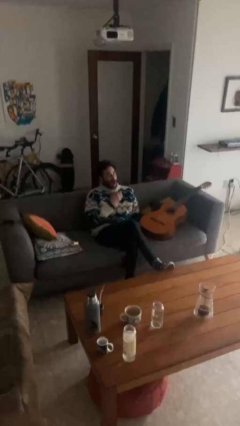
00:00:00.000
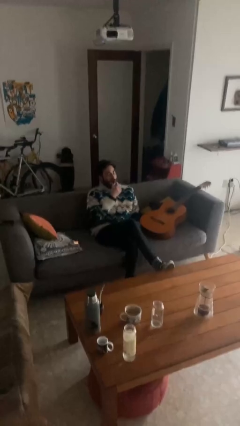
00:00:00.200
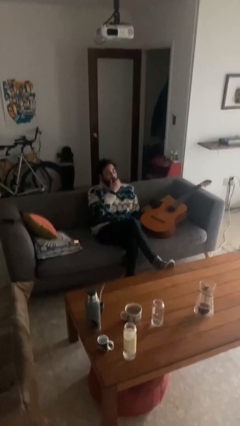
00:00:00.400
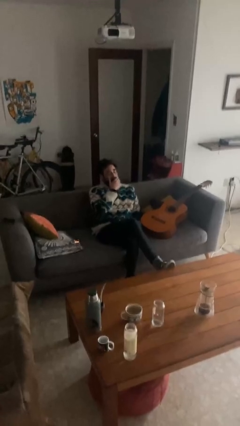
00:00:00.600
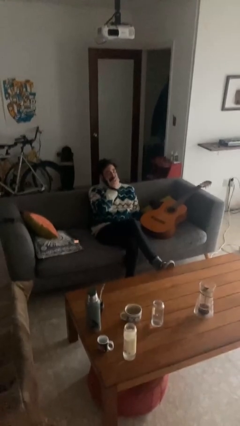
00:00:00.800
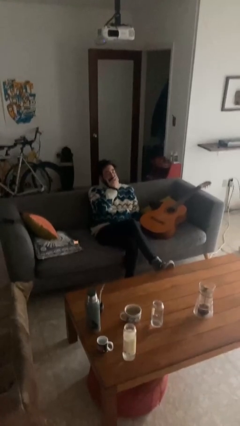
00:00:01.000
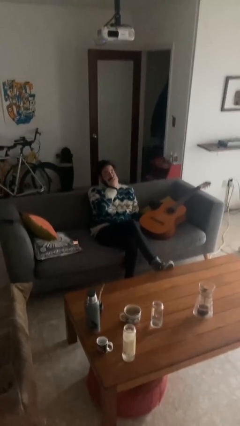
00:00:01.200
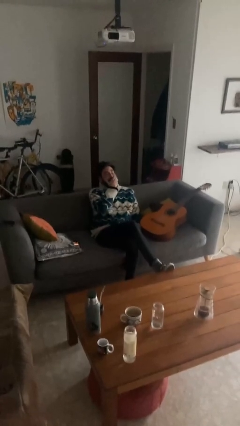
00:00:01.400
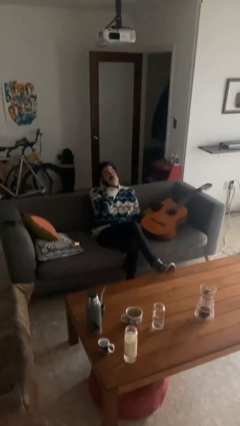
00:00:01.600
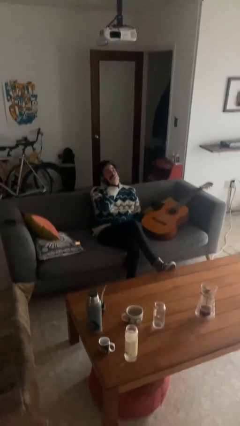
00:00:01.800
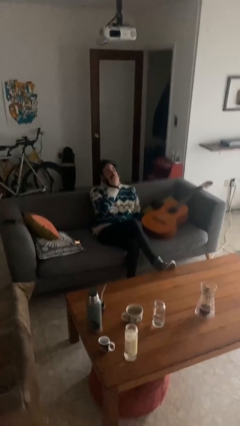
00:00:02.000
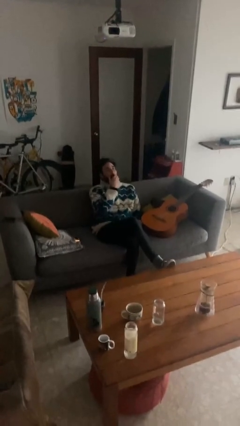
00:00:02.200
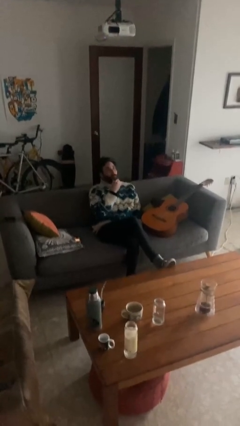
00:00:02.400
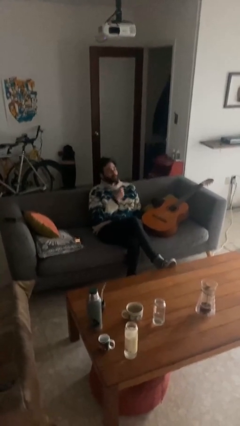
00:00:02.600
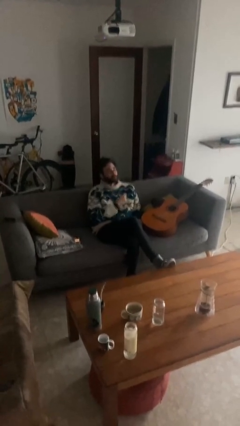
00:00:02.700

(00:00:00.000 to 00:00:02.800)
person yawns

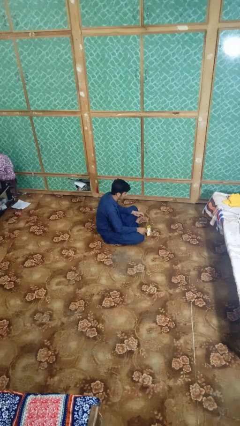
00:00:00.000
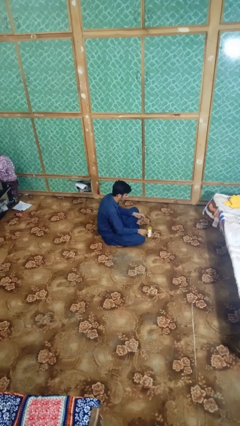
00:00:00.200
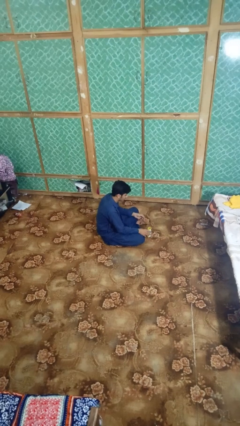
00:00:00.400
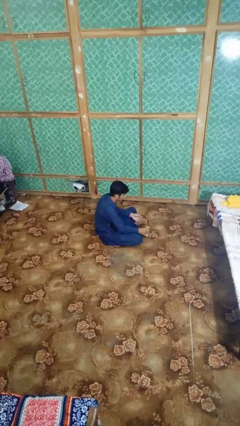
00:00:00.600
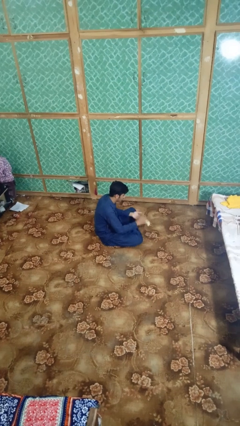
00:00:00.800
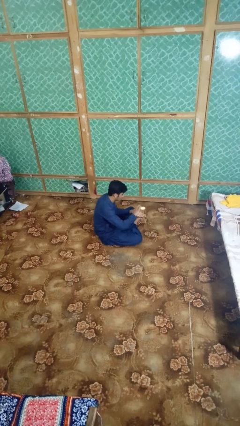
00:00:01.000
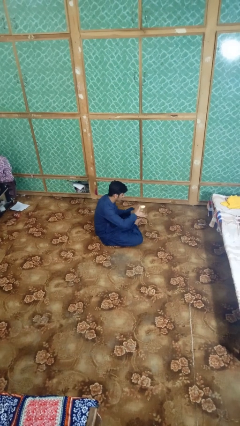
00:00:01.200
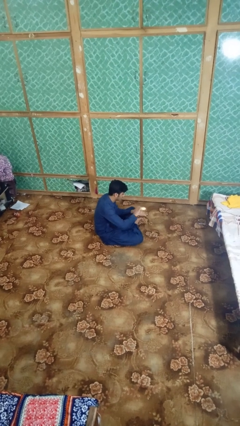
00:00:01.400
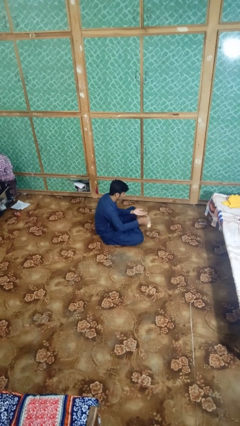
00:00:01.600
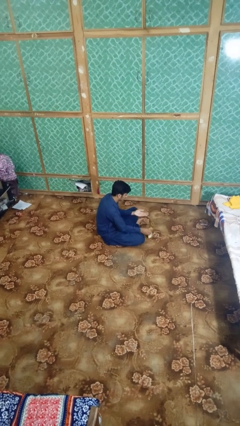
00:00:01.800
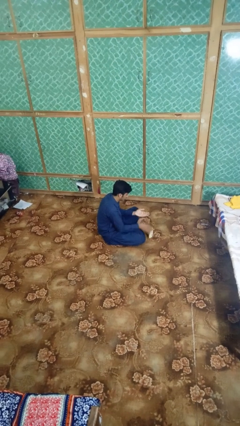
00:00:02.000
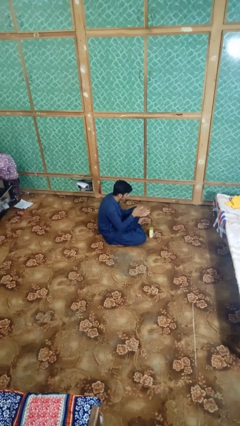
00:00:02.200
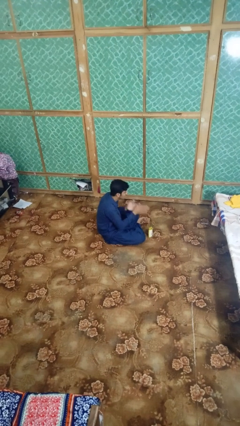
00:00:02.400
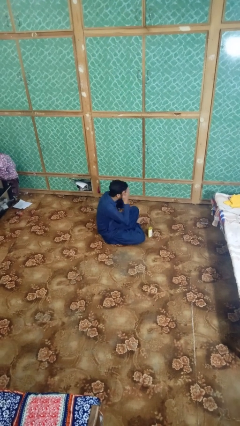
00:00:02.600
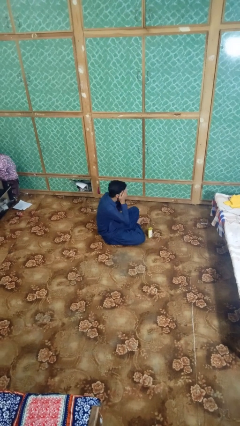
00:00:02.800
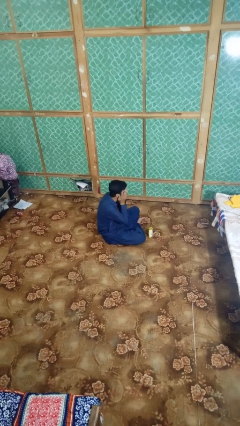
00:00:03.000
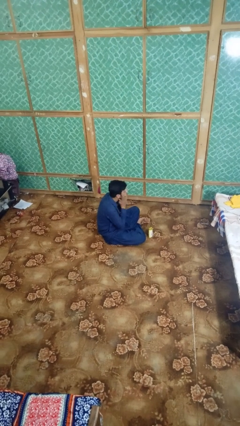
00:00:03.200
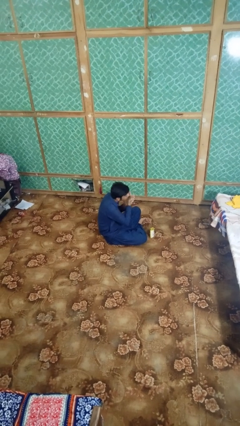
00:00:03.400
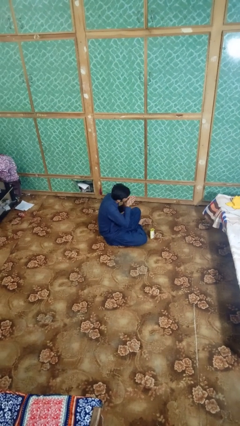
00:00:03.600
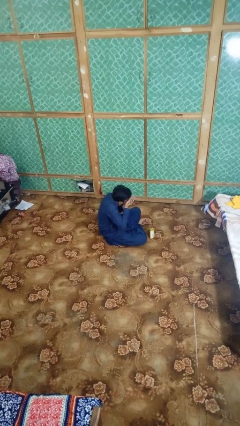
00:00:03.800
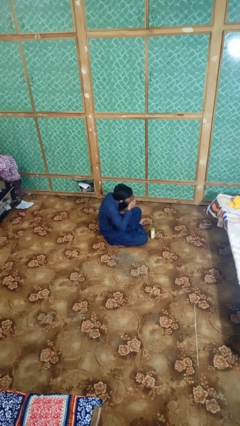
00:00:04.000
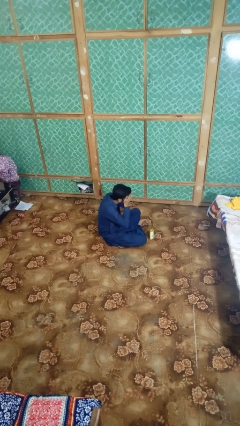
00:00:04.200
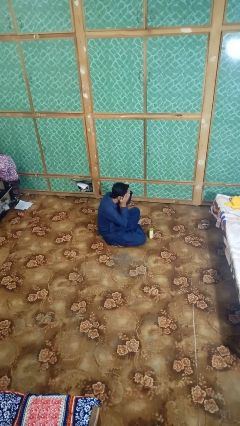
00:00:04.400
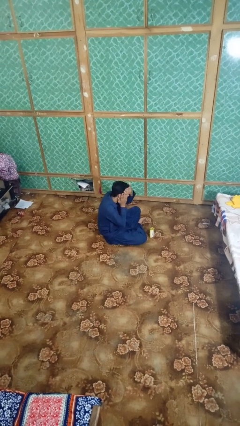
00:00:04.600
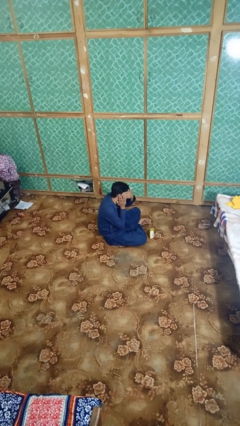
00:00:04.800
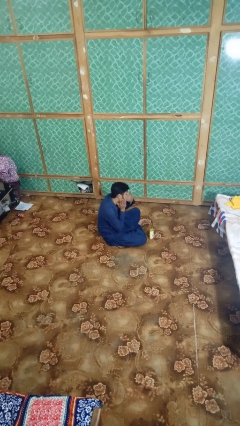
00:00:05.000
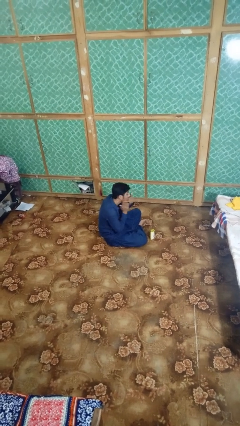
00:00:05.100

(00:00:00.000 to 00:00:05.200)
person applies sunscreen

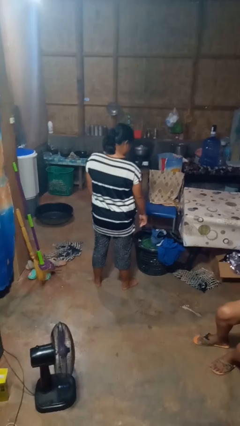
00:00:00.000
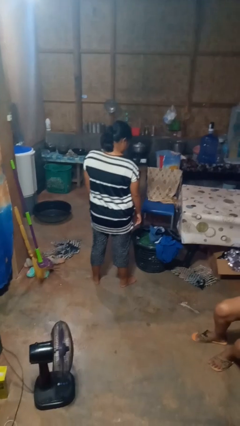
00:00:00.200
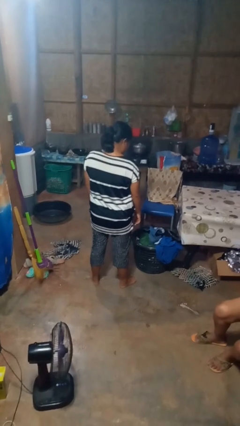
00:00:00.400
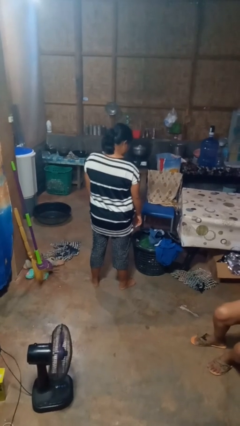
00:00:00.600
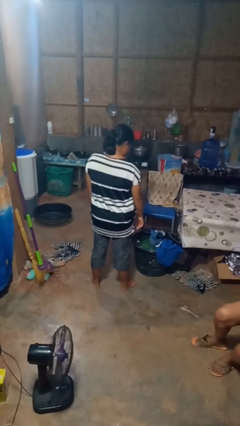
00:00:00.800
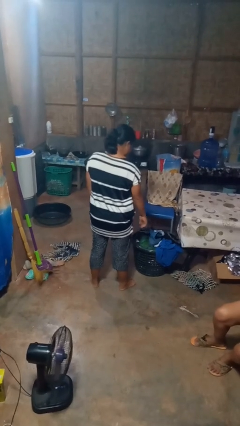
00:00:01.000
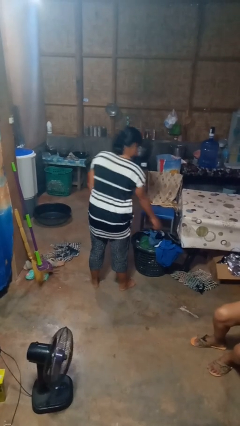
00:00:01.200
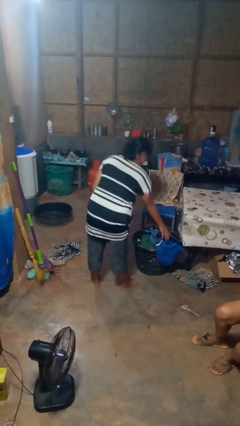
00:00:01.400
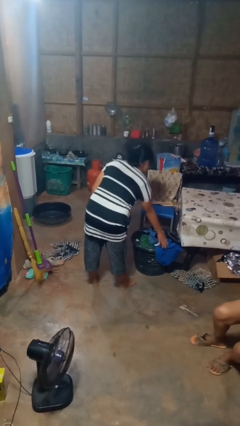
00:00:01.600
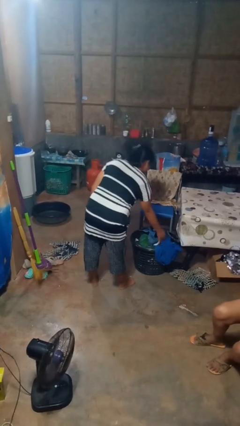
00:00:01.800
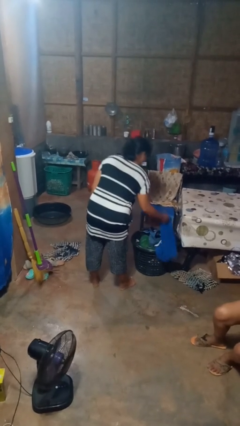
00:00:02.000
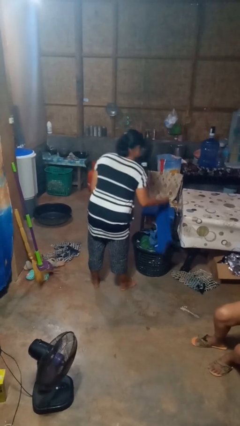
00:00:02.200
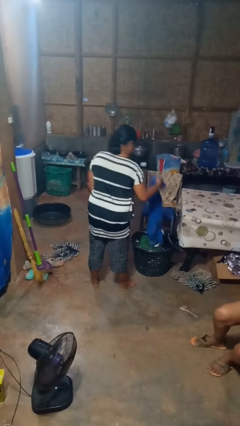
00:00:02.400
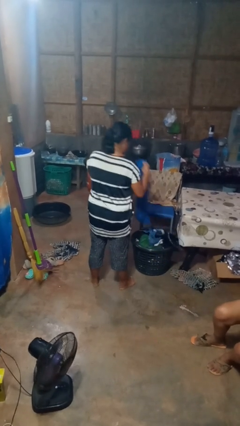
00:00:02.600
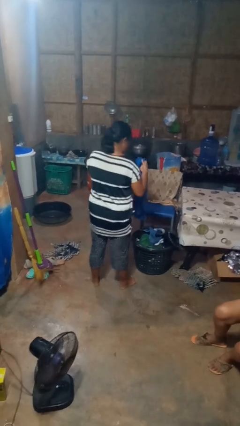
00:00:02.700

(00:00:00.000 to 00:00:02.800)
person takes object from basket

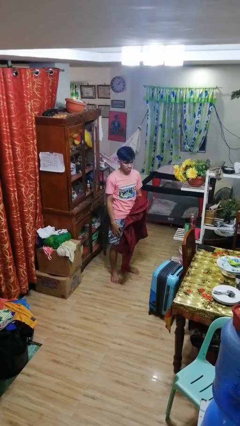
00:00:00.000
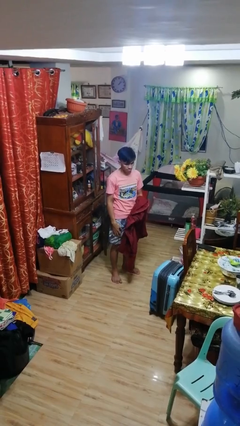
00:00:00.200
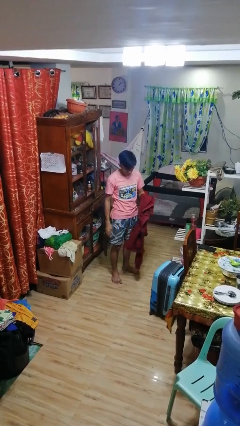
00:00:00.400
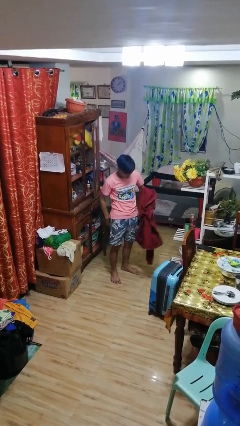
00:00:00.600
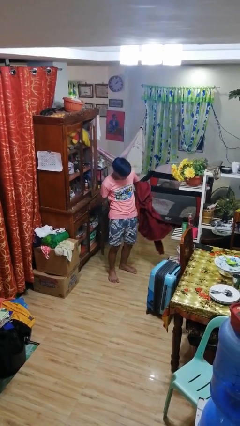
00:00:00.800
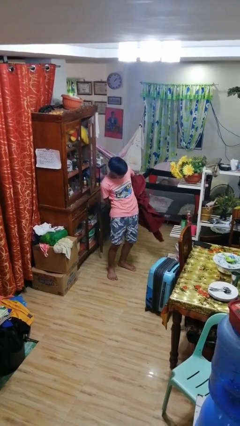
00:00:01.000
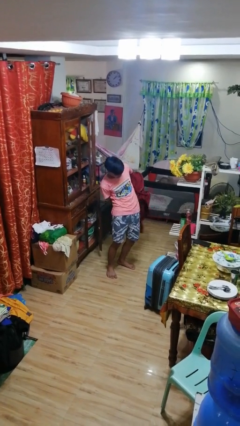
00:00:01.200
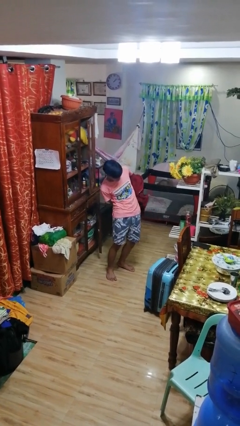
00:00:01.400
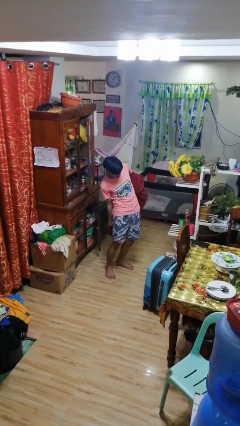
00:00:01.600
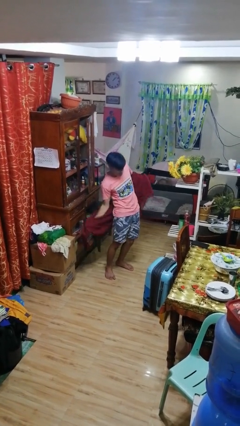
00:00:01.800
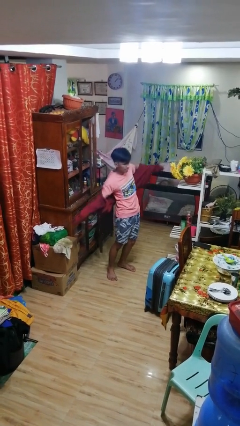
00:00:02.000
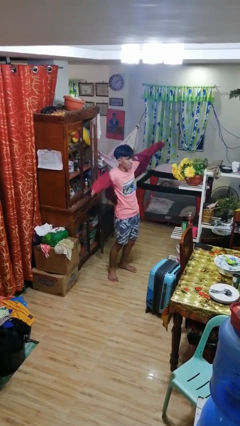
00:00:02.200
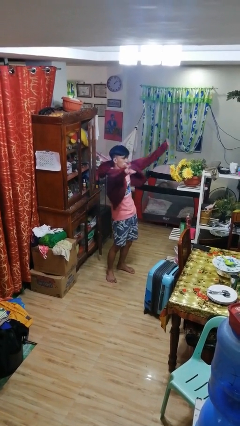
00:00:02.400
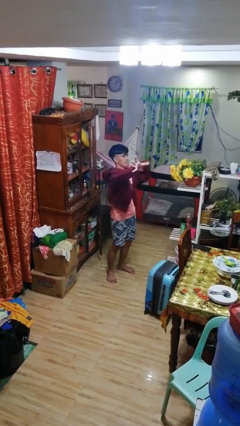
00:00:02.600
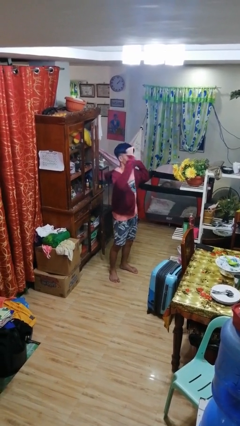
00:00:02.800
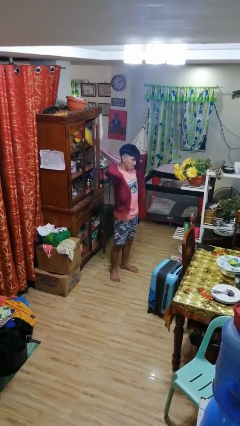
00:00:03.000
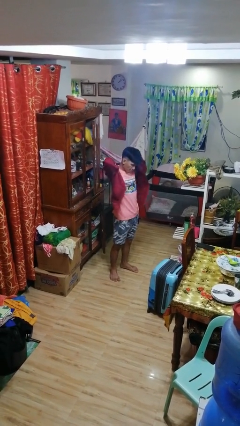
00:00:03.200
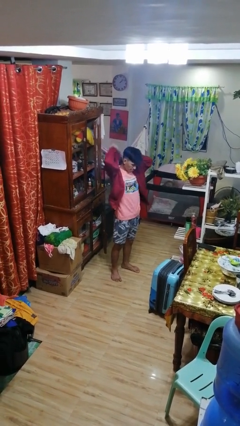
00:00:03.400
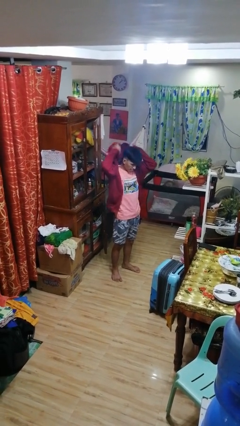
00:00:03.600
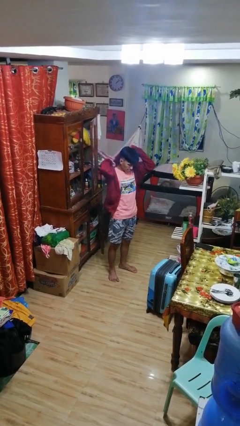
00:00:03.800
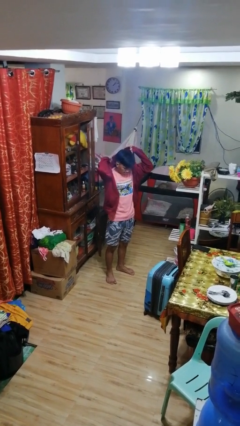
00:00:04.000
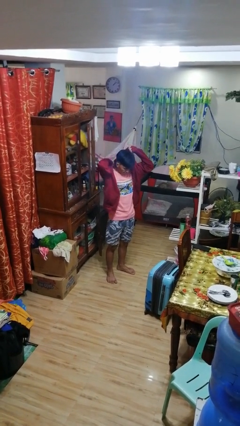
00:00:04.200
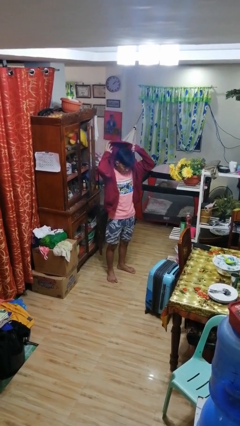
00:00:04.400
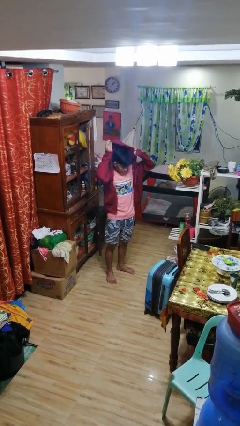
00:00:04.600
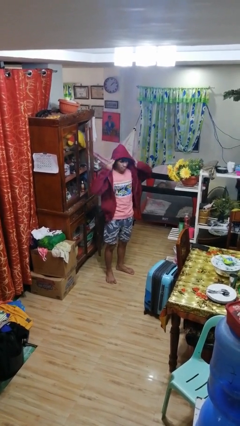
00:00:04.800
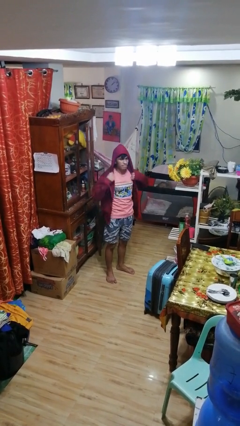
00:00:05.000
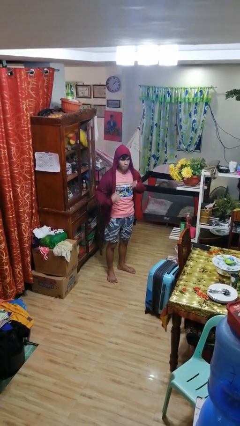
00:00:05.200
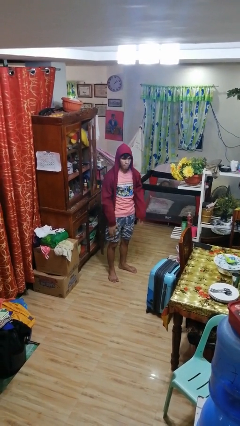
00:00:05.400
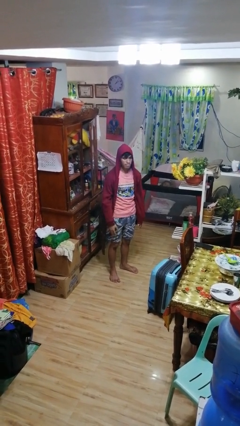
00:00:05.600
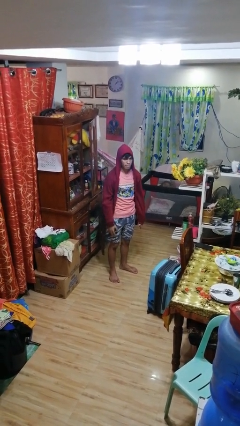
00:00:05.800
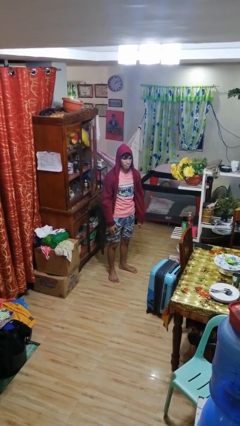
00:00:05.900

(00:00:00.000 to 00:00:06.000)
person puts on hoodie

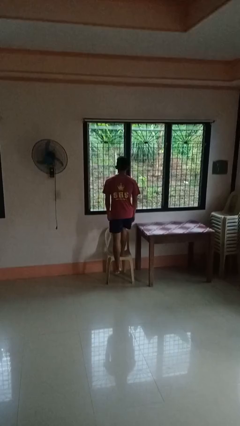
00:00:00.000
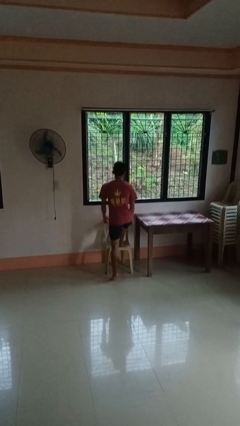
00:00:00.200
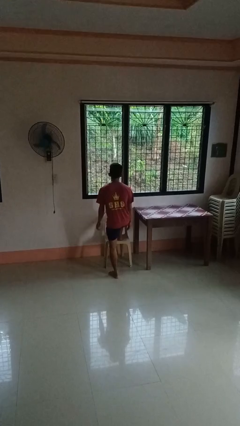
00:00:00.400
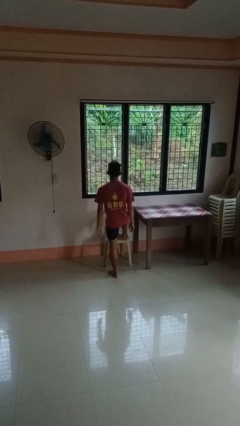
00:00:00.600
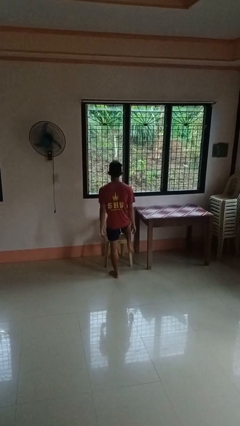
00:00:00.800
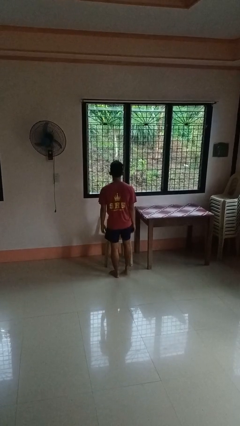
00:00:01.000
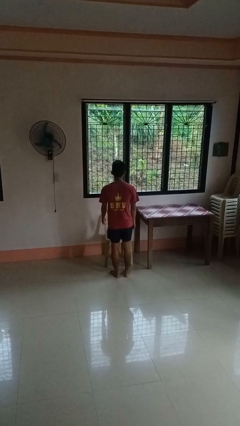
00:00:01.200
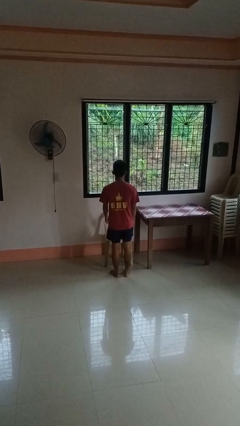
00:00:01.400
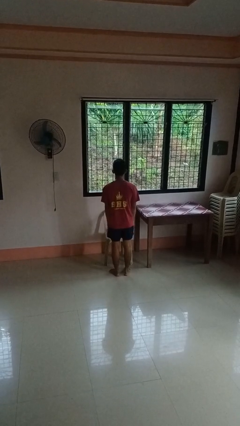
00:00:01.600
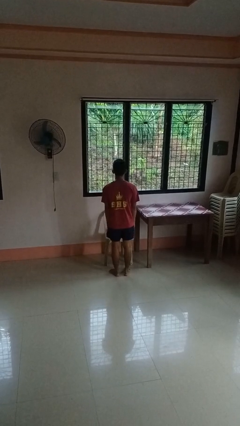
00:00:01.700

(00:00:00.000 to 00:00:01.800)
person climbs off chair
